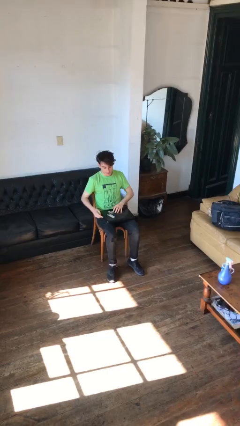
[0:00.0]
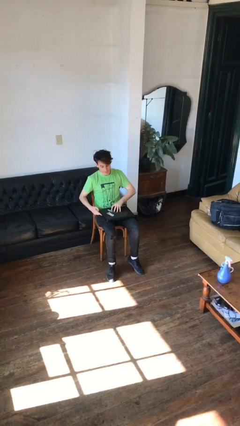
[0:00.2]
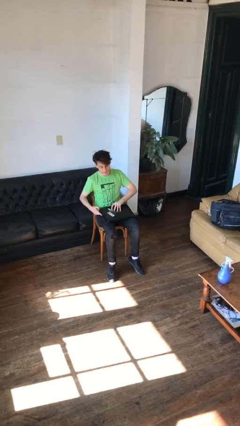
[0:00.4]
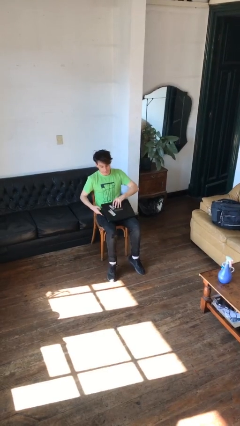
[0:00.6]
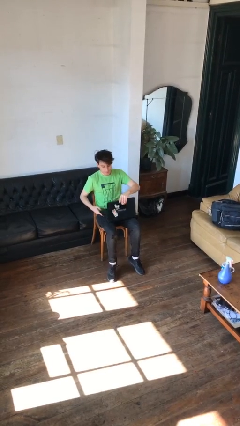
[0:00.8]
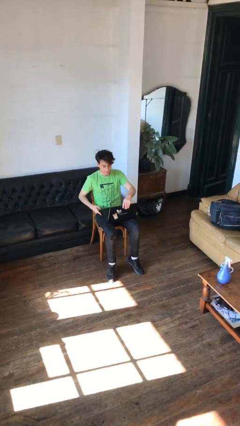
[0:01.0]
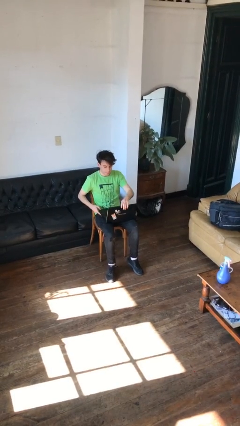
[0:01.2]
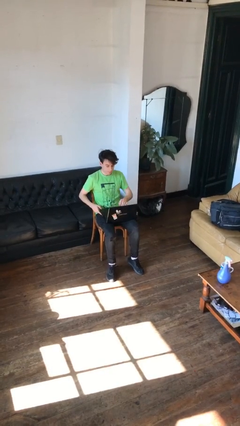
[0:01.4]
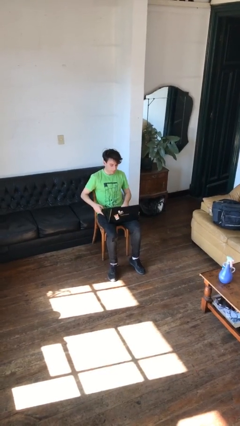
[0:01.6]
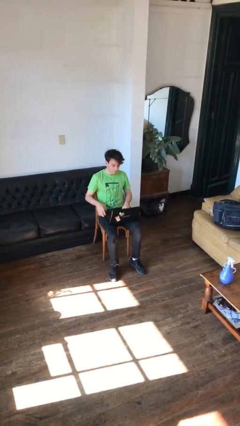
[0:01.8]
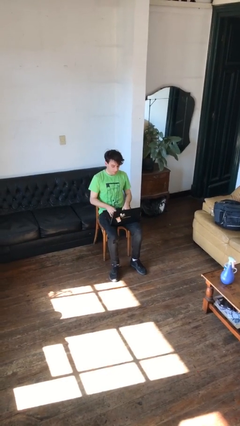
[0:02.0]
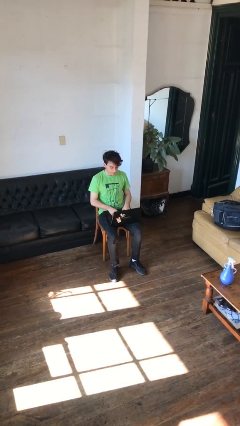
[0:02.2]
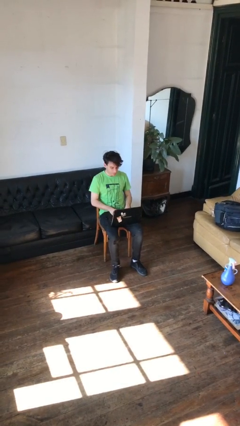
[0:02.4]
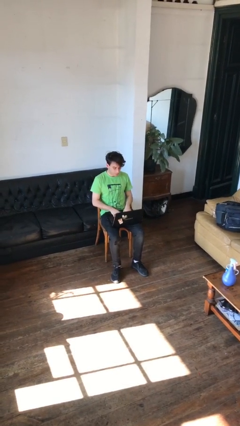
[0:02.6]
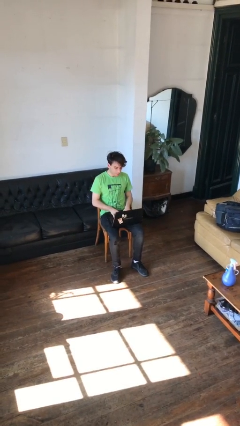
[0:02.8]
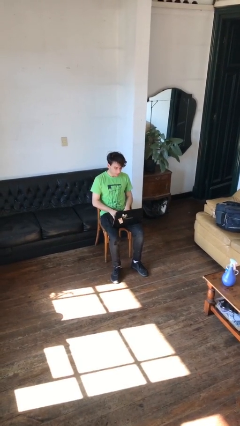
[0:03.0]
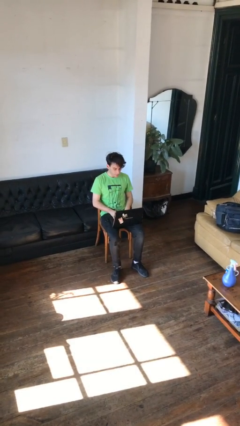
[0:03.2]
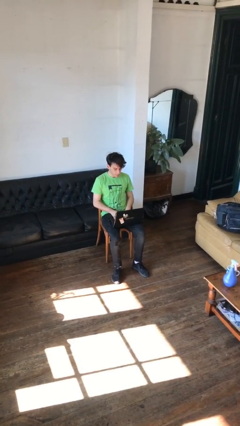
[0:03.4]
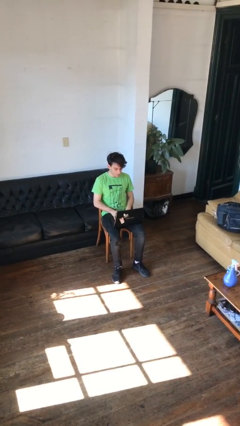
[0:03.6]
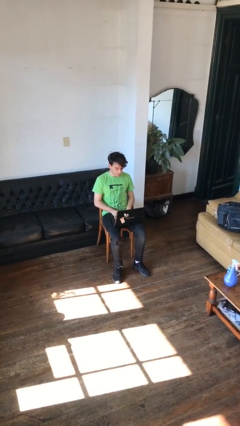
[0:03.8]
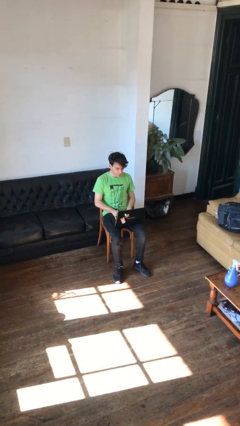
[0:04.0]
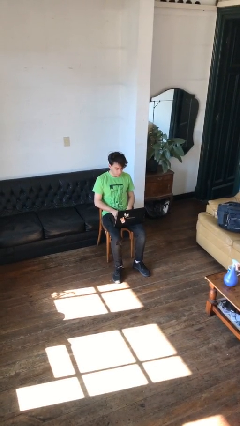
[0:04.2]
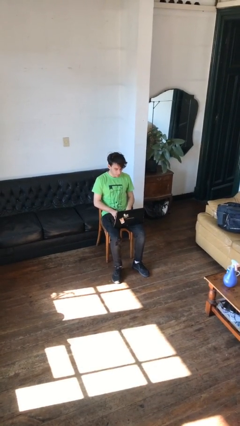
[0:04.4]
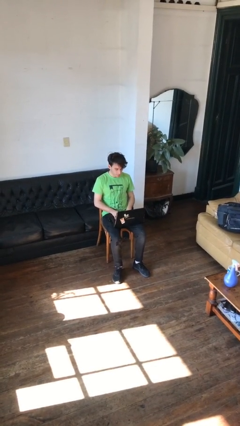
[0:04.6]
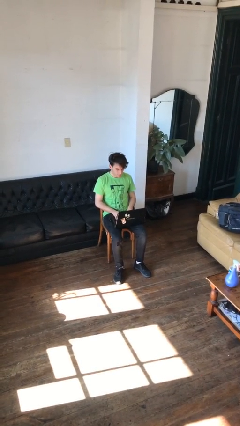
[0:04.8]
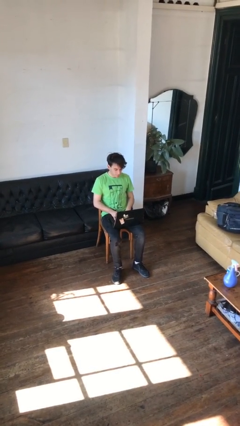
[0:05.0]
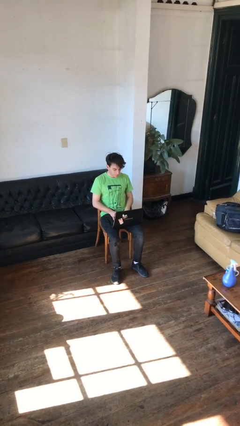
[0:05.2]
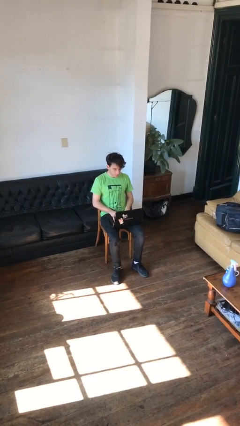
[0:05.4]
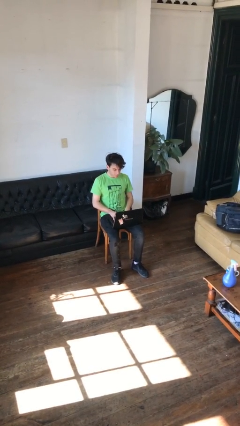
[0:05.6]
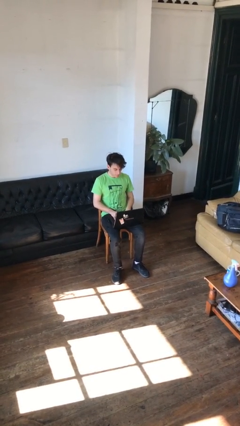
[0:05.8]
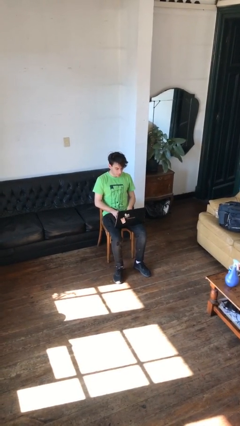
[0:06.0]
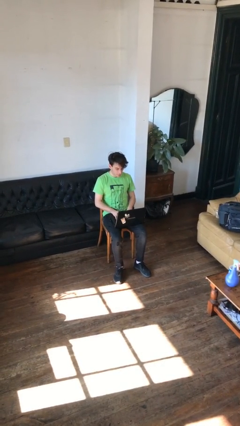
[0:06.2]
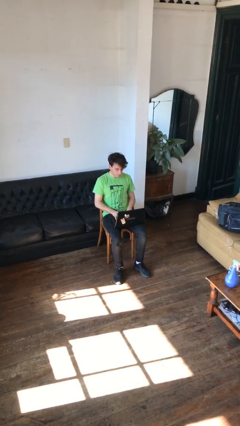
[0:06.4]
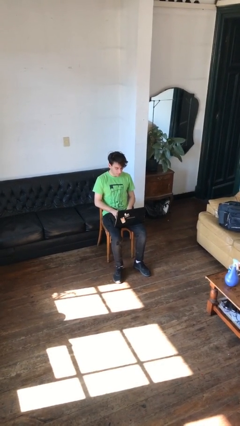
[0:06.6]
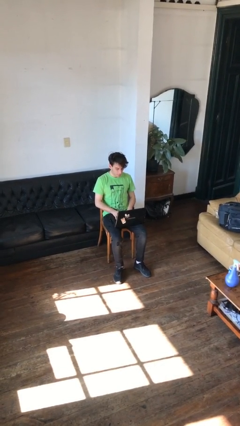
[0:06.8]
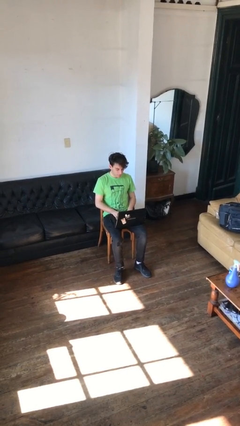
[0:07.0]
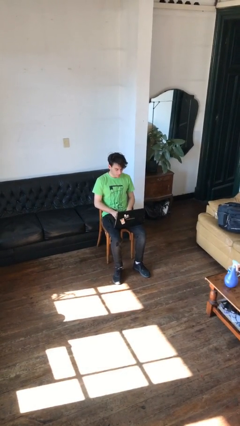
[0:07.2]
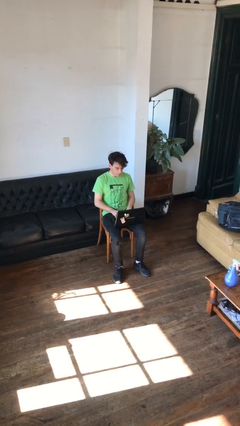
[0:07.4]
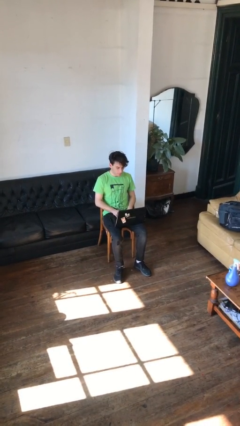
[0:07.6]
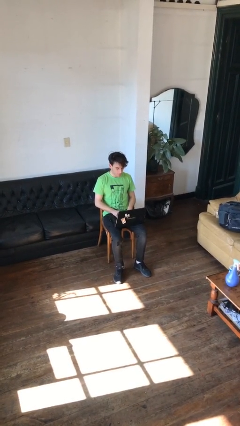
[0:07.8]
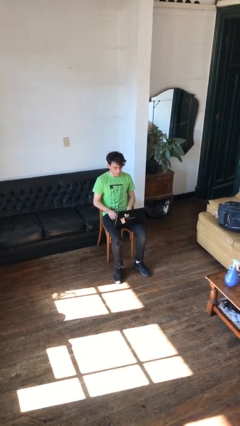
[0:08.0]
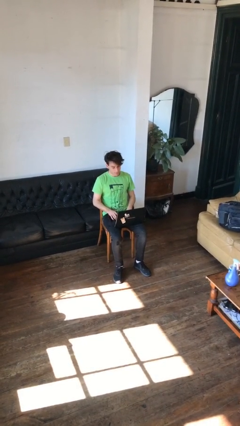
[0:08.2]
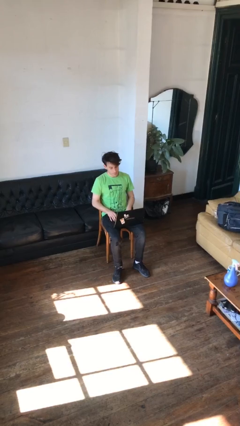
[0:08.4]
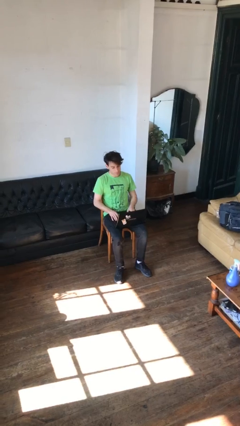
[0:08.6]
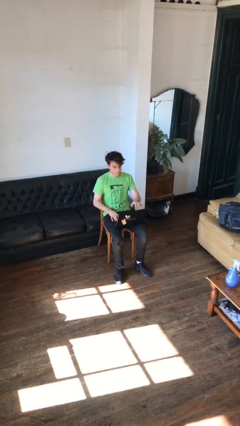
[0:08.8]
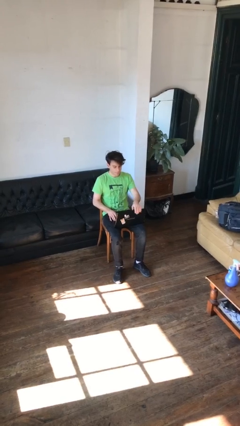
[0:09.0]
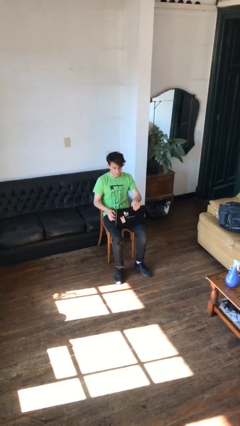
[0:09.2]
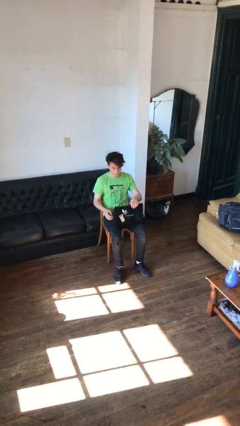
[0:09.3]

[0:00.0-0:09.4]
person interacts with laptop

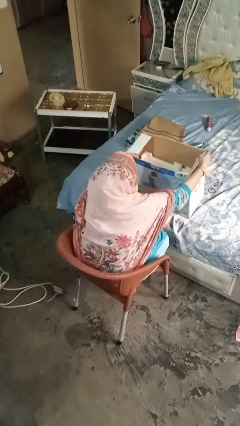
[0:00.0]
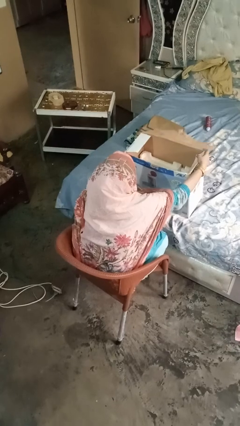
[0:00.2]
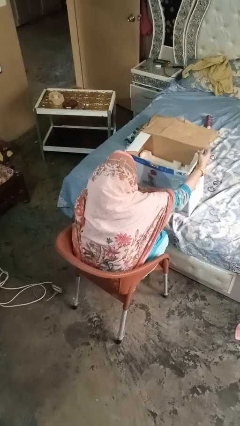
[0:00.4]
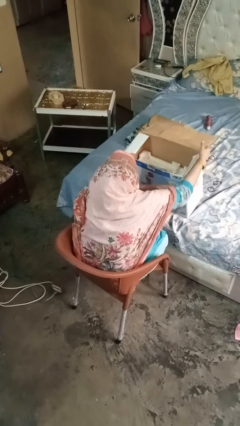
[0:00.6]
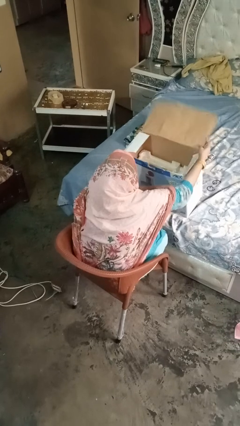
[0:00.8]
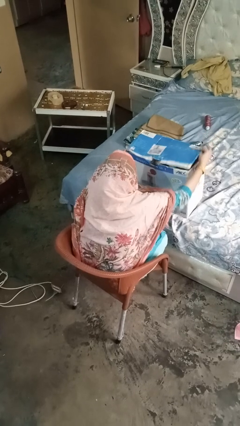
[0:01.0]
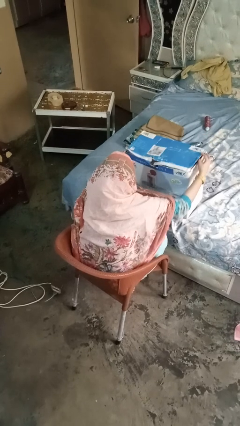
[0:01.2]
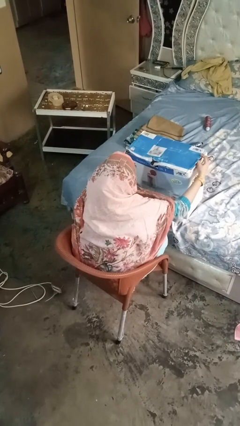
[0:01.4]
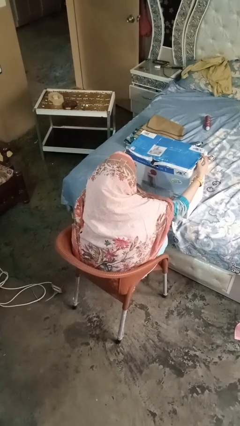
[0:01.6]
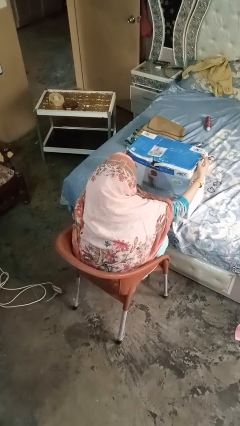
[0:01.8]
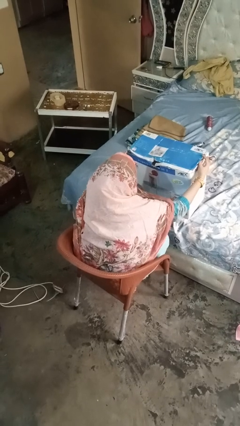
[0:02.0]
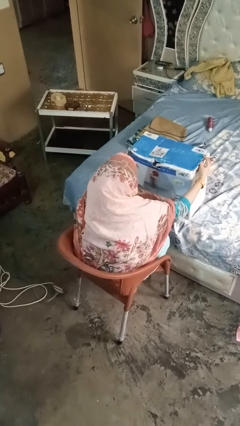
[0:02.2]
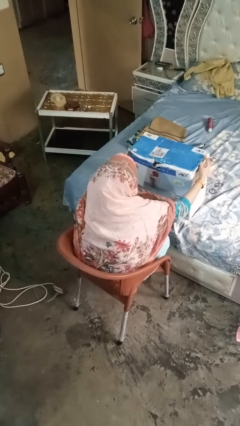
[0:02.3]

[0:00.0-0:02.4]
person closes box

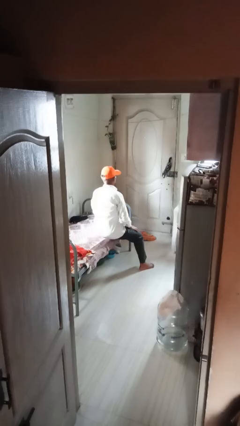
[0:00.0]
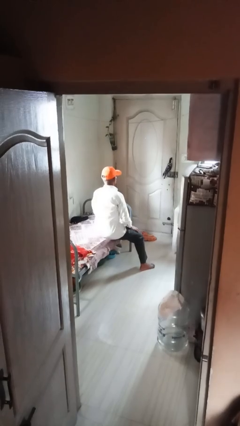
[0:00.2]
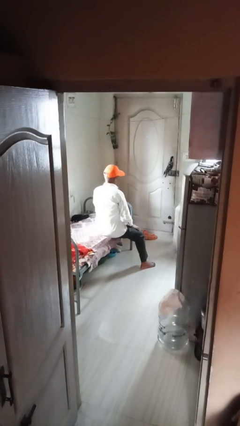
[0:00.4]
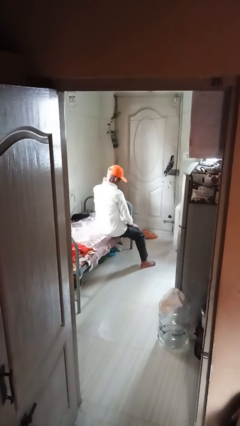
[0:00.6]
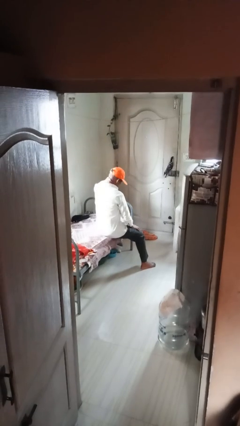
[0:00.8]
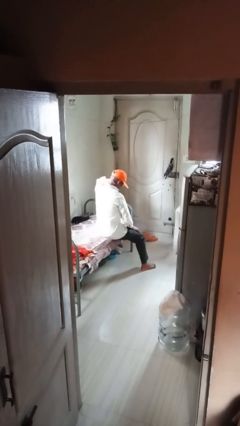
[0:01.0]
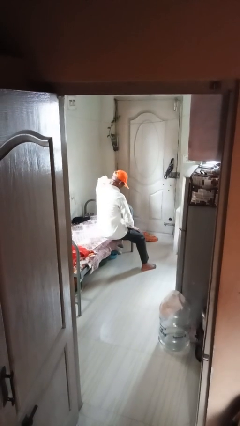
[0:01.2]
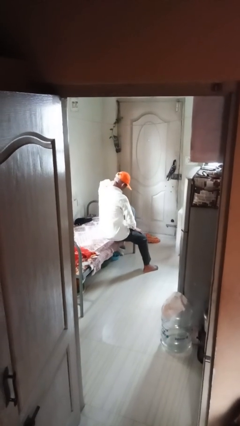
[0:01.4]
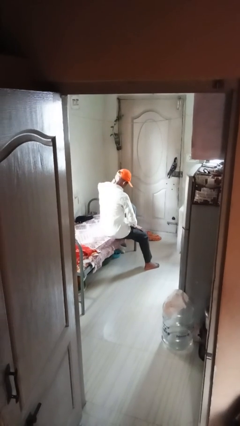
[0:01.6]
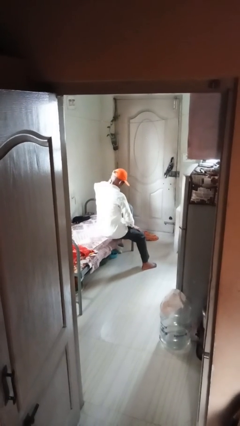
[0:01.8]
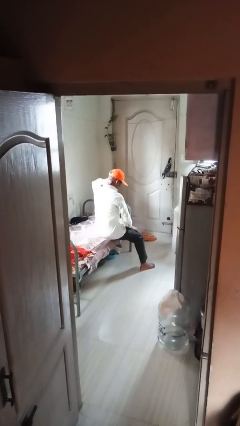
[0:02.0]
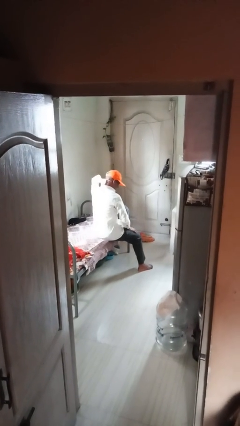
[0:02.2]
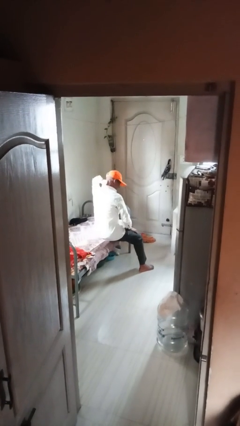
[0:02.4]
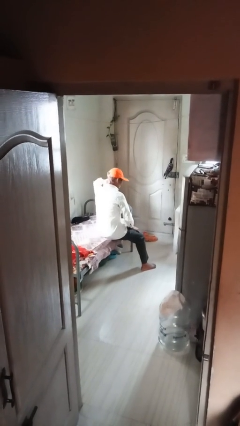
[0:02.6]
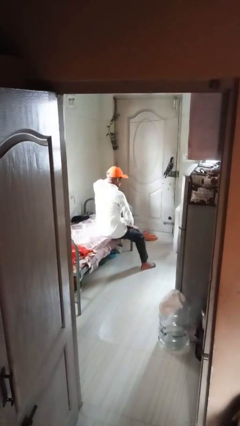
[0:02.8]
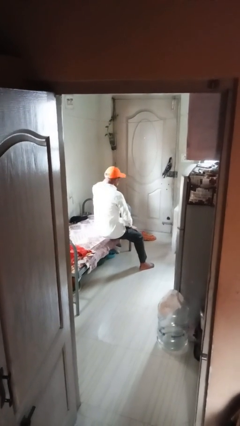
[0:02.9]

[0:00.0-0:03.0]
person rubs neck

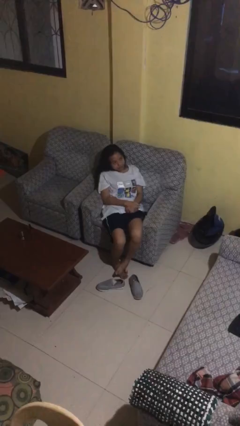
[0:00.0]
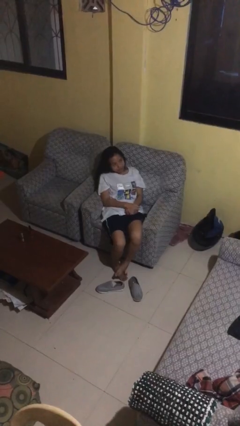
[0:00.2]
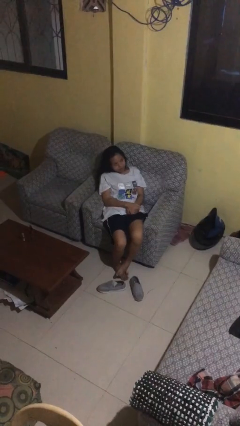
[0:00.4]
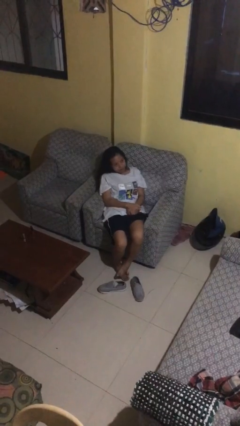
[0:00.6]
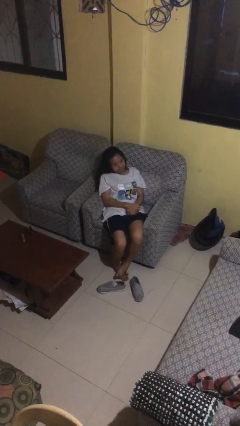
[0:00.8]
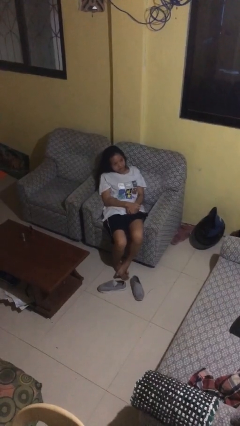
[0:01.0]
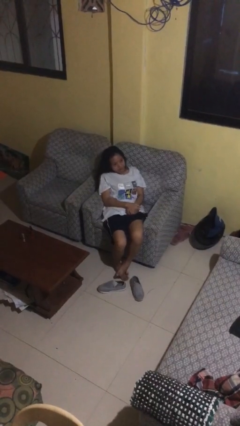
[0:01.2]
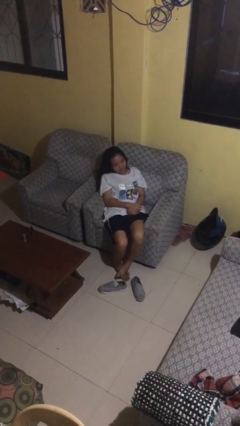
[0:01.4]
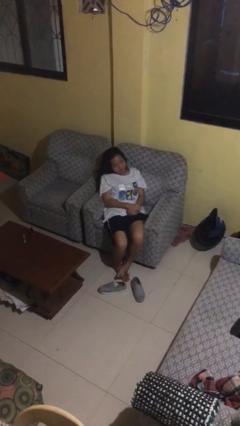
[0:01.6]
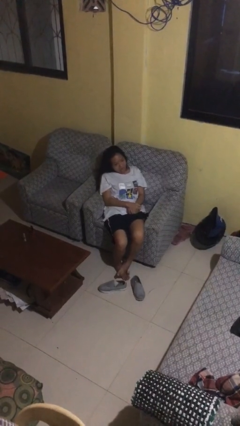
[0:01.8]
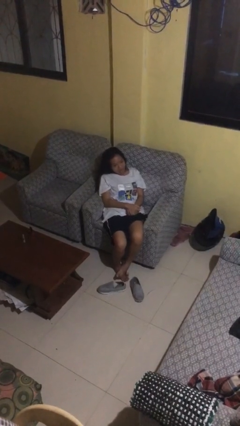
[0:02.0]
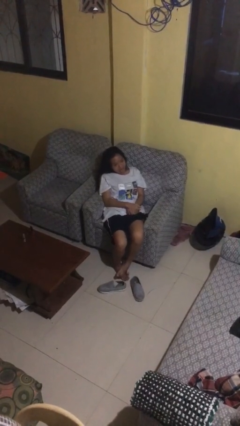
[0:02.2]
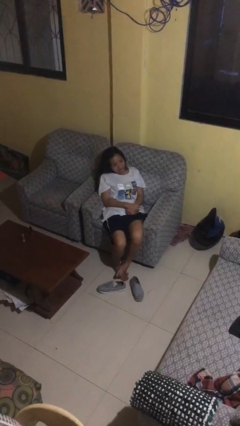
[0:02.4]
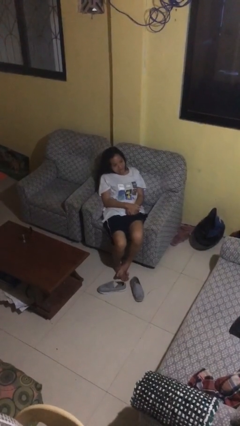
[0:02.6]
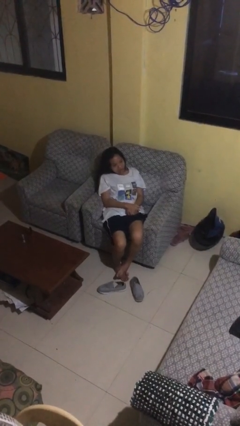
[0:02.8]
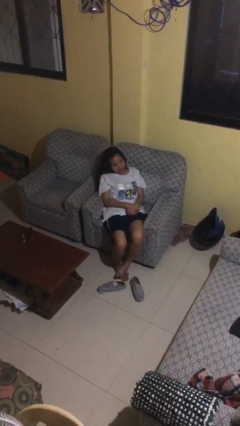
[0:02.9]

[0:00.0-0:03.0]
person sticks out tongue
